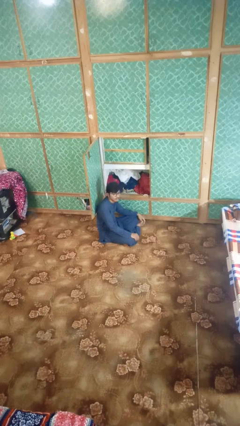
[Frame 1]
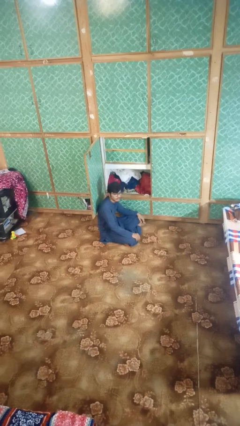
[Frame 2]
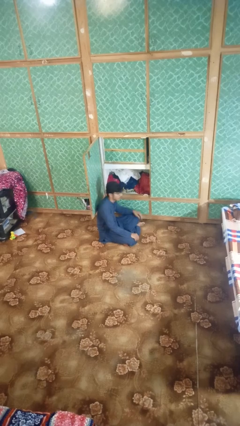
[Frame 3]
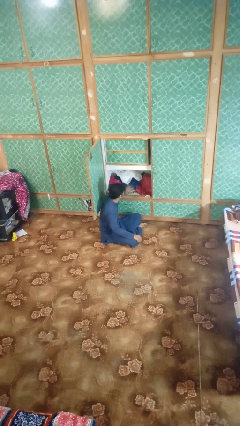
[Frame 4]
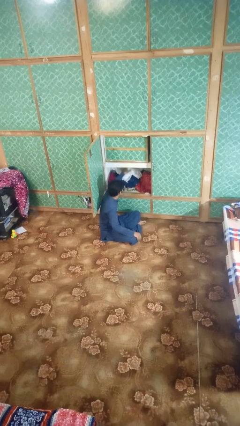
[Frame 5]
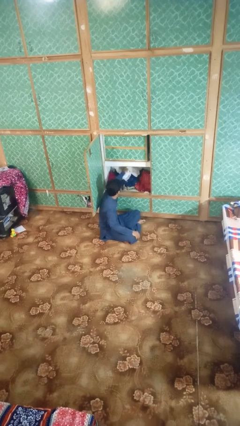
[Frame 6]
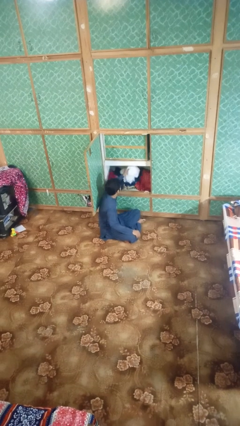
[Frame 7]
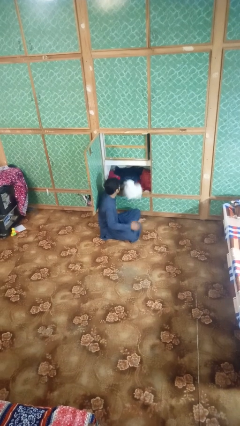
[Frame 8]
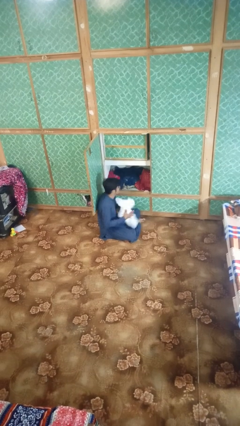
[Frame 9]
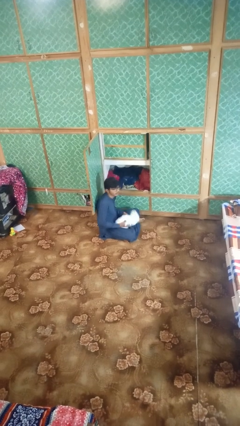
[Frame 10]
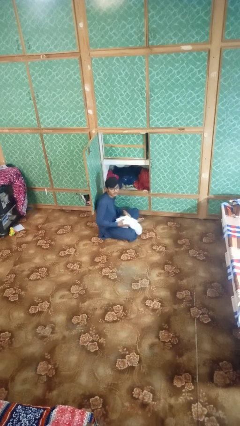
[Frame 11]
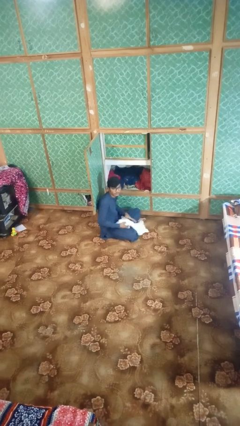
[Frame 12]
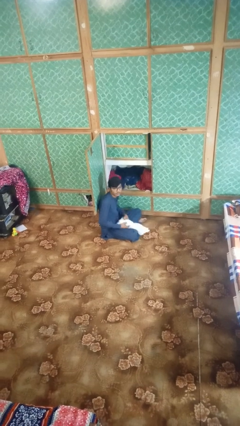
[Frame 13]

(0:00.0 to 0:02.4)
person takes clothes from dresser

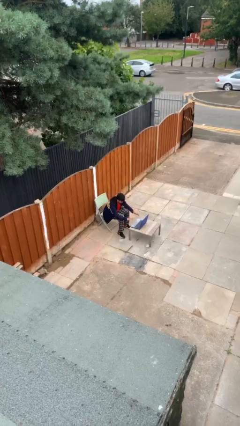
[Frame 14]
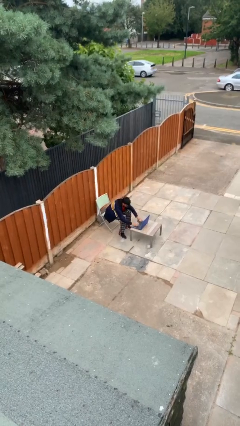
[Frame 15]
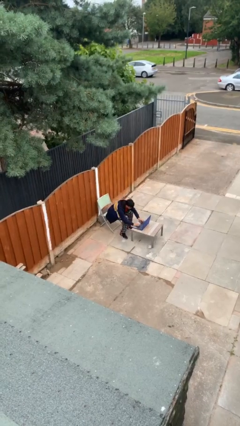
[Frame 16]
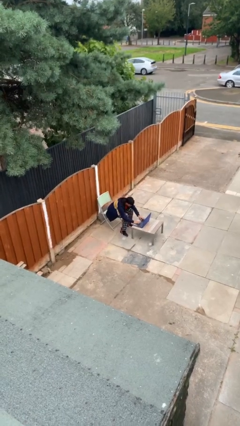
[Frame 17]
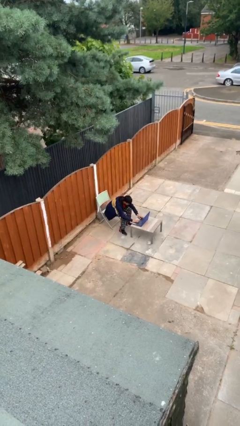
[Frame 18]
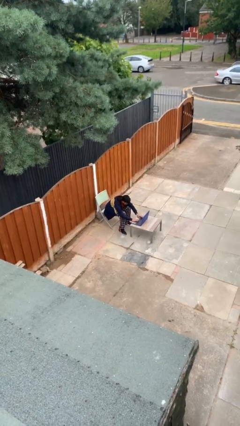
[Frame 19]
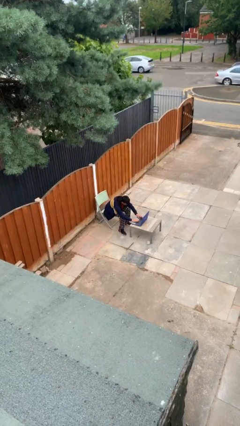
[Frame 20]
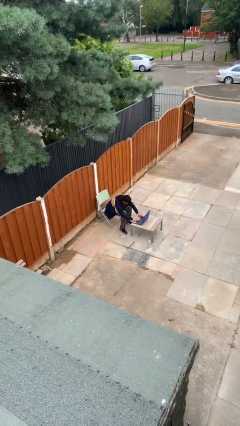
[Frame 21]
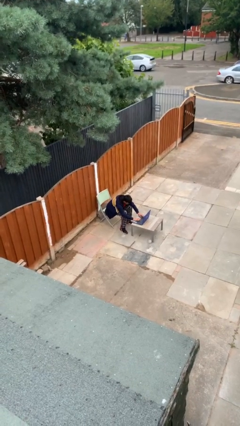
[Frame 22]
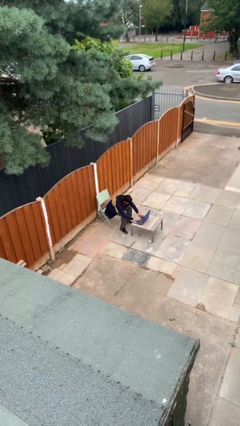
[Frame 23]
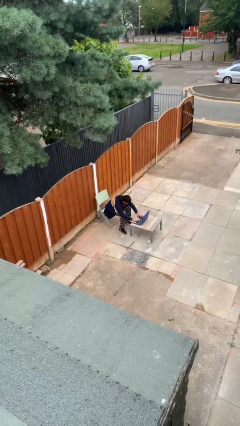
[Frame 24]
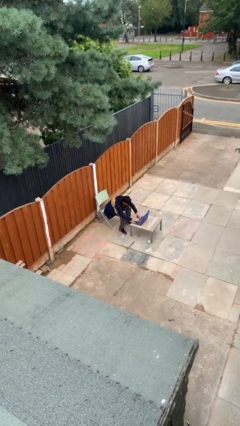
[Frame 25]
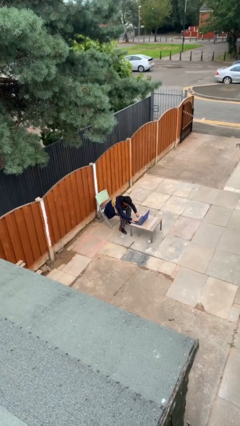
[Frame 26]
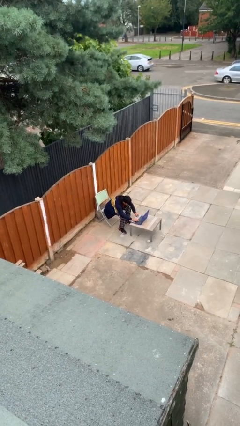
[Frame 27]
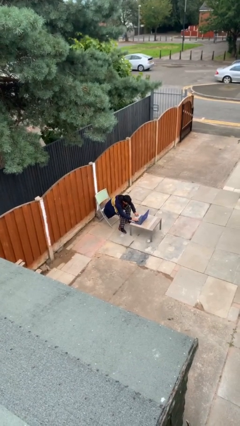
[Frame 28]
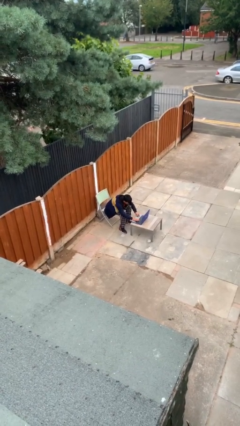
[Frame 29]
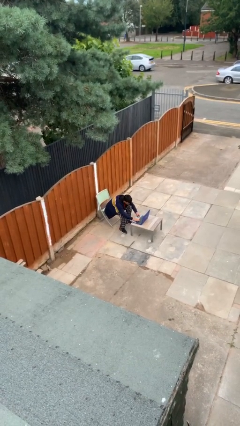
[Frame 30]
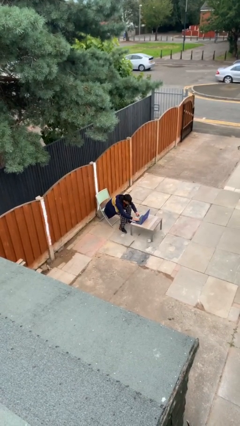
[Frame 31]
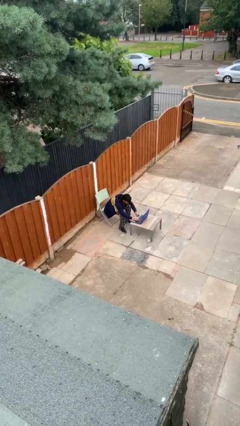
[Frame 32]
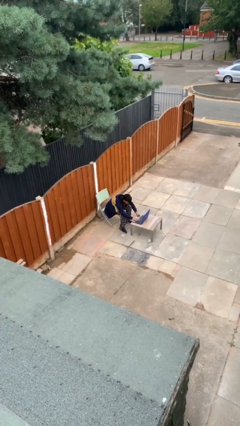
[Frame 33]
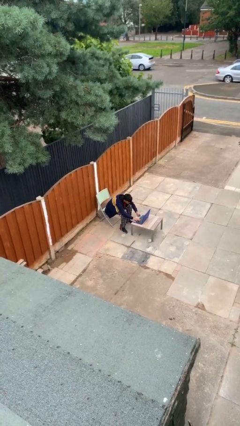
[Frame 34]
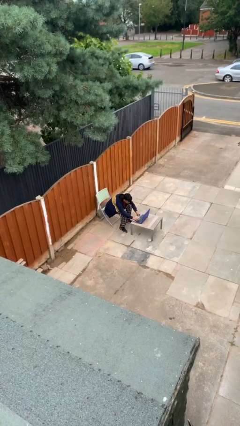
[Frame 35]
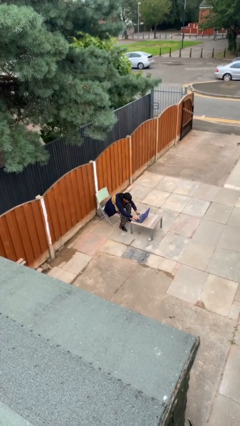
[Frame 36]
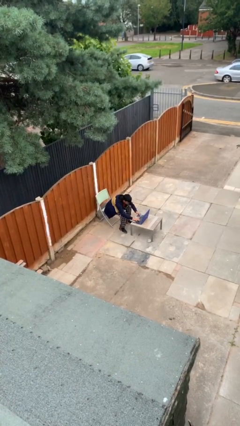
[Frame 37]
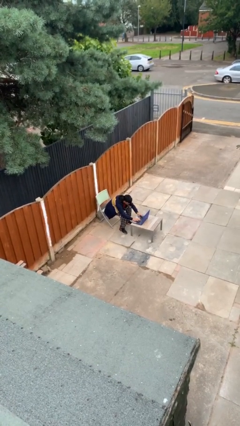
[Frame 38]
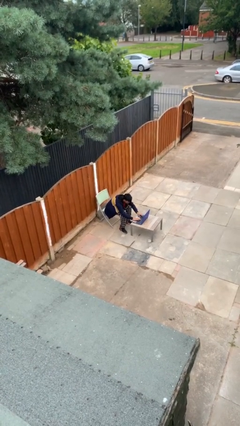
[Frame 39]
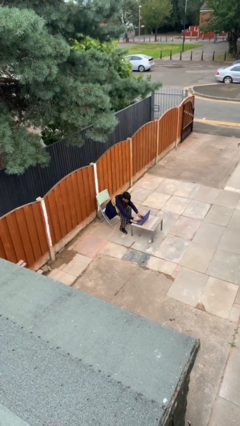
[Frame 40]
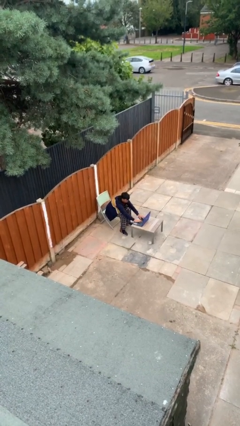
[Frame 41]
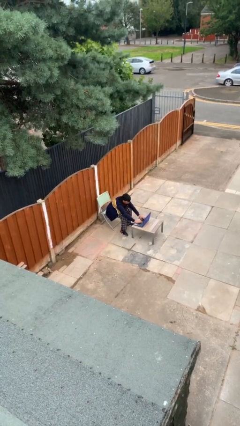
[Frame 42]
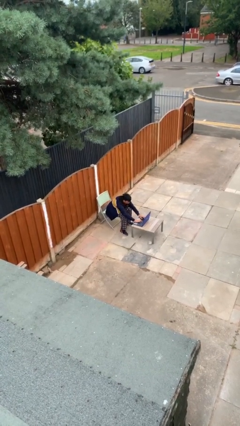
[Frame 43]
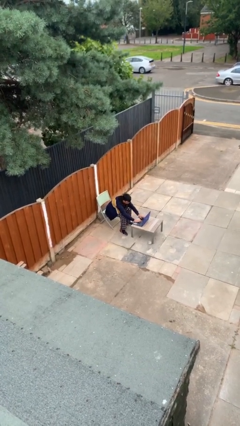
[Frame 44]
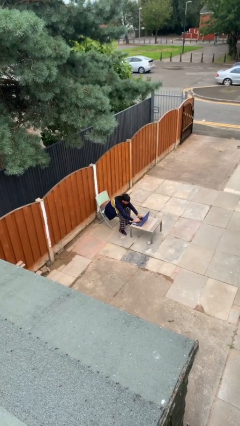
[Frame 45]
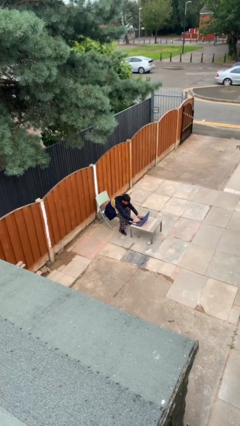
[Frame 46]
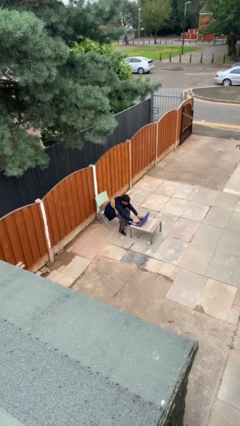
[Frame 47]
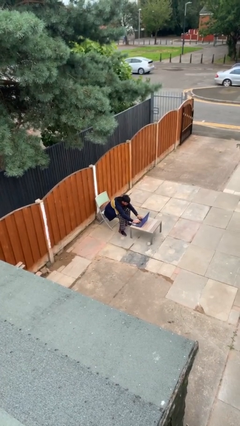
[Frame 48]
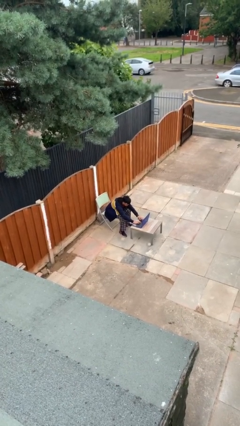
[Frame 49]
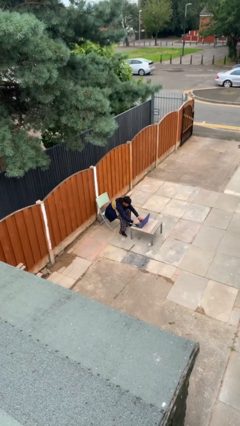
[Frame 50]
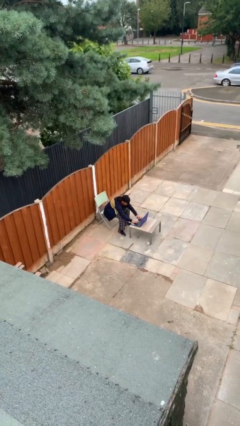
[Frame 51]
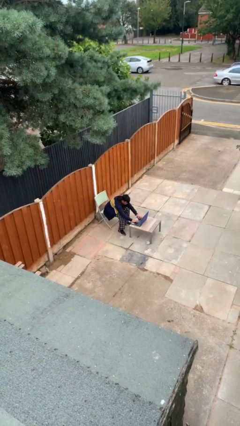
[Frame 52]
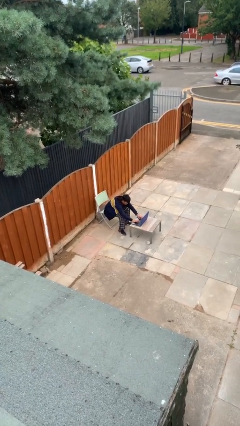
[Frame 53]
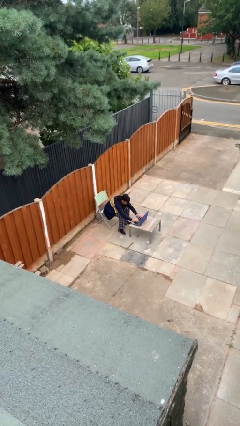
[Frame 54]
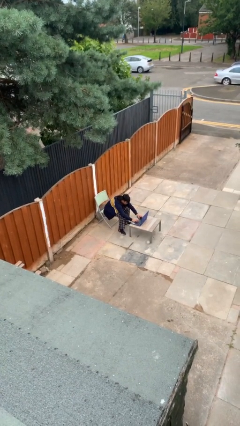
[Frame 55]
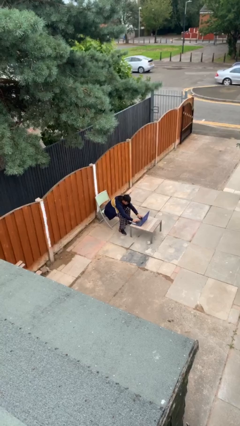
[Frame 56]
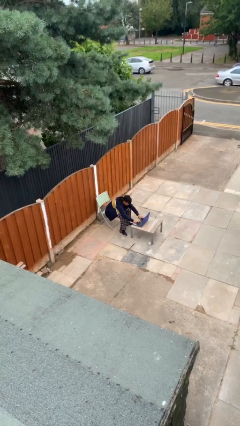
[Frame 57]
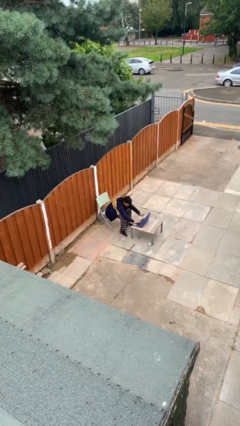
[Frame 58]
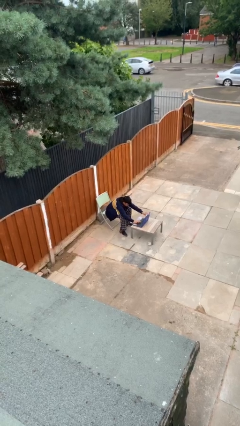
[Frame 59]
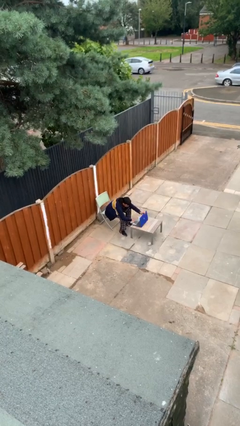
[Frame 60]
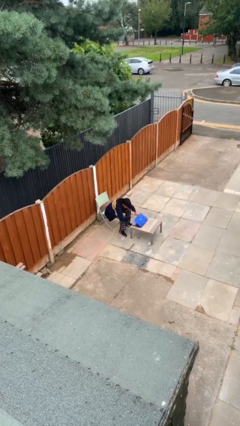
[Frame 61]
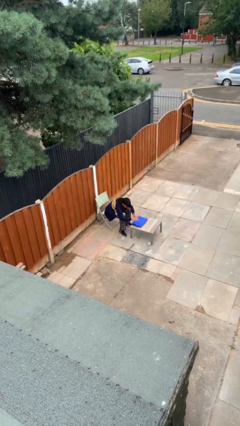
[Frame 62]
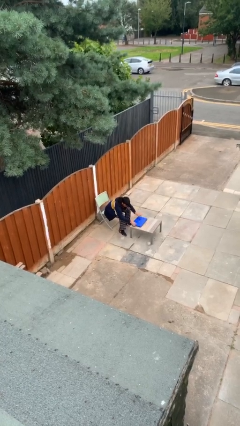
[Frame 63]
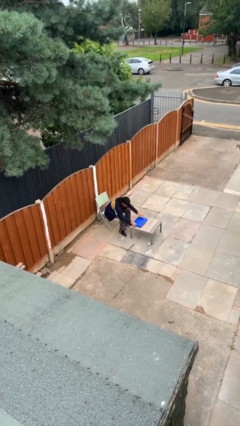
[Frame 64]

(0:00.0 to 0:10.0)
person interacts with laptop

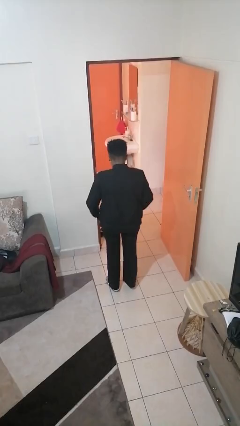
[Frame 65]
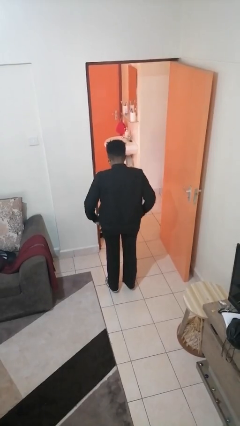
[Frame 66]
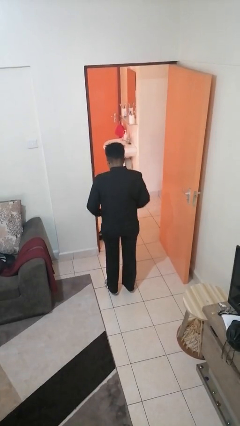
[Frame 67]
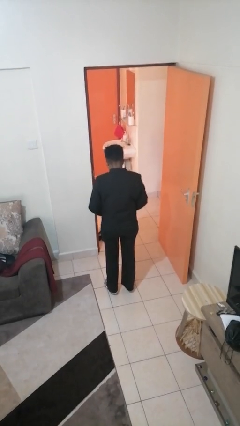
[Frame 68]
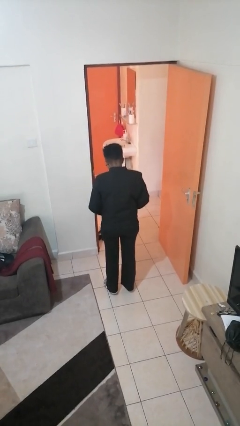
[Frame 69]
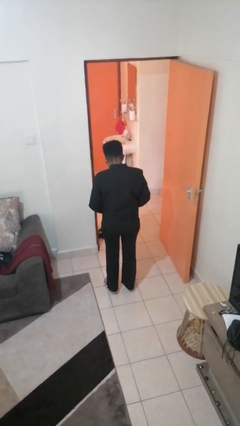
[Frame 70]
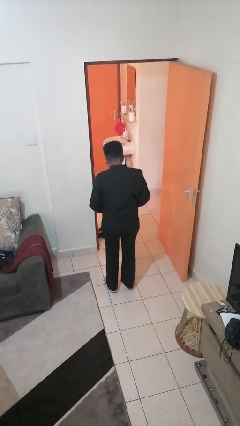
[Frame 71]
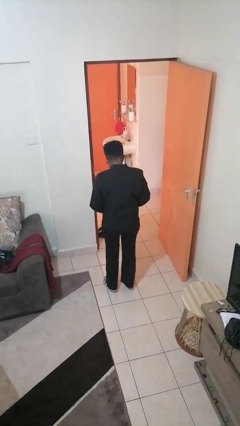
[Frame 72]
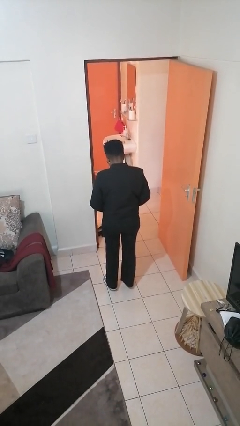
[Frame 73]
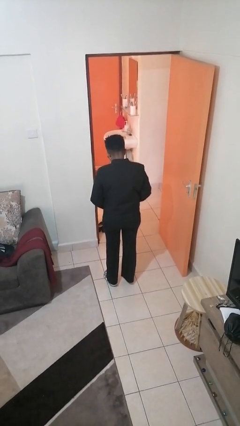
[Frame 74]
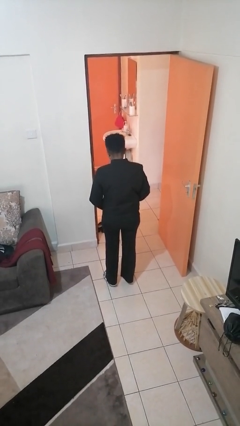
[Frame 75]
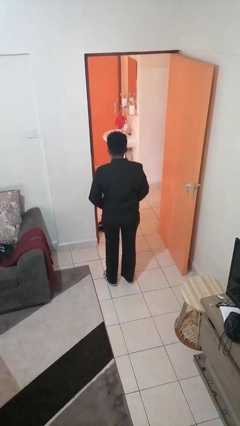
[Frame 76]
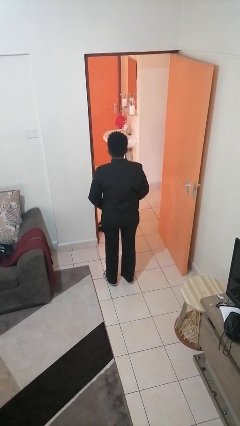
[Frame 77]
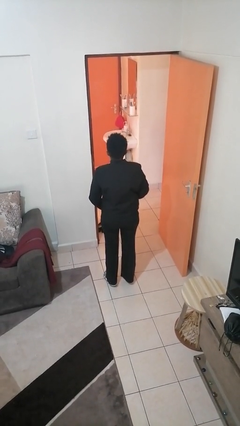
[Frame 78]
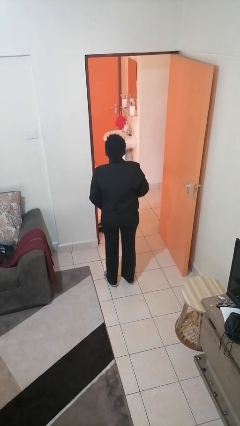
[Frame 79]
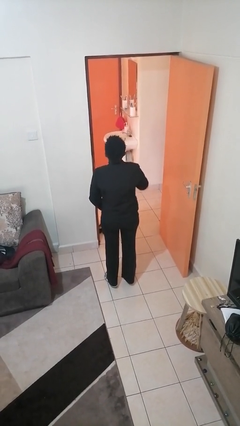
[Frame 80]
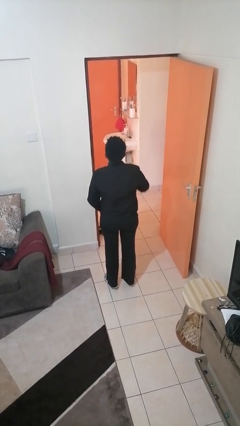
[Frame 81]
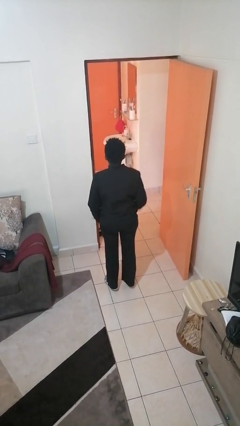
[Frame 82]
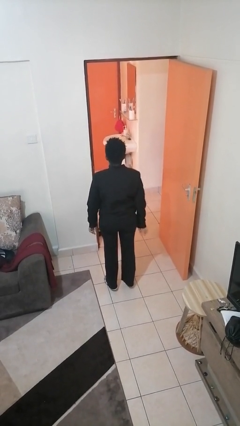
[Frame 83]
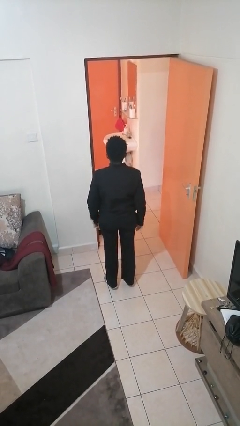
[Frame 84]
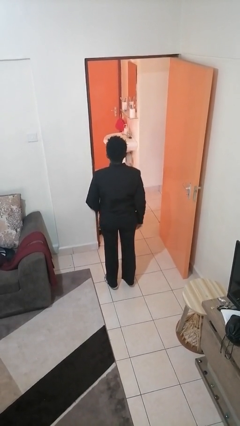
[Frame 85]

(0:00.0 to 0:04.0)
person zips up jacket

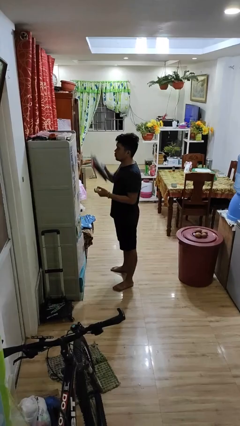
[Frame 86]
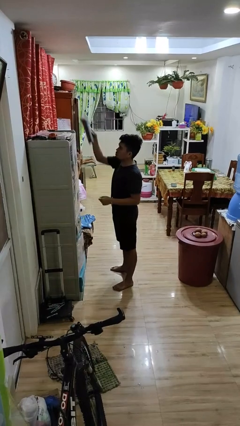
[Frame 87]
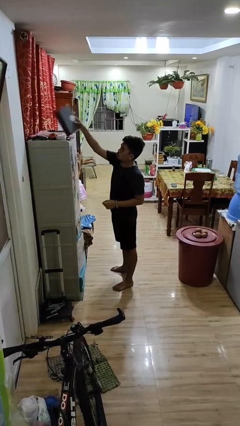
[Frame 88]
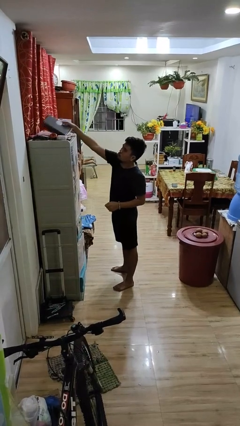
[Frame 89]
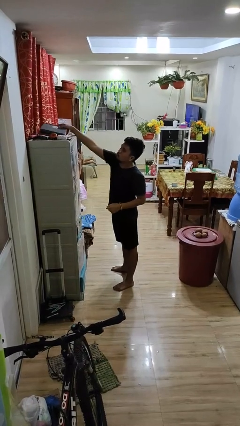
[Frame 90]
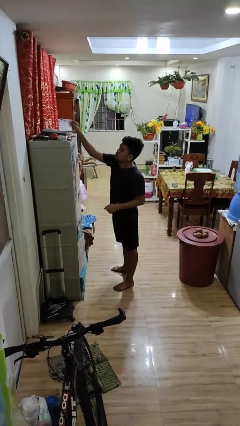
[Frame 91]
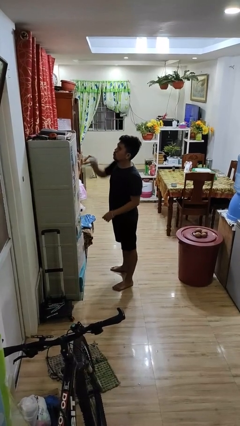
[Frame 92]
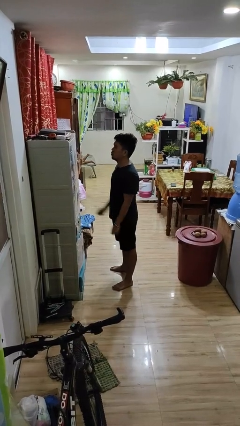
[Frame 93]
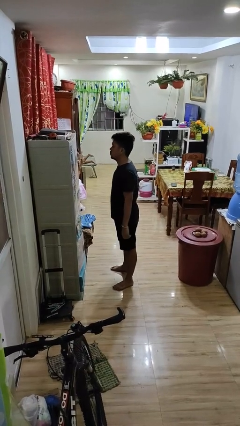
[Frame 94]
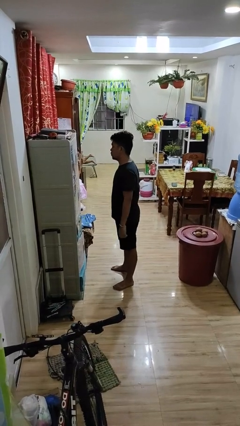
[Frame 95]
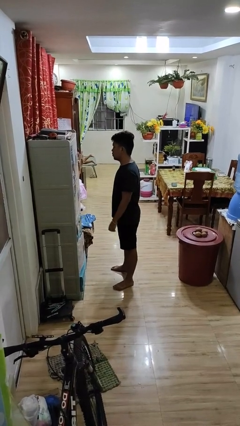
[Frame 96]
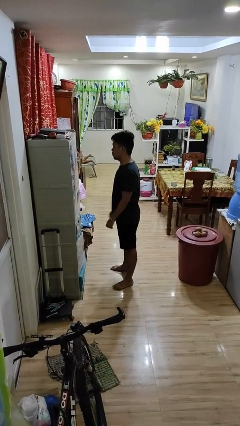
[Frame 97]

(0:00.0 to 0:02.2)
person puts down object on shelf
